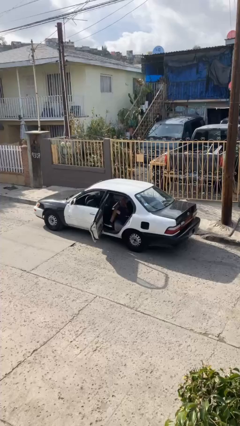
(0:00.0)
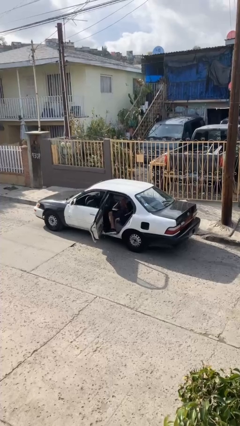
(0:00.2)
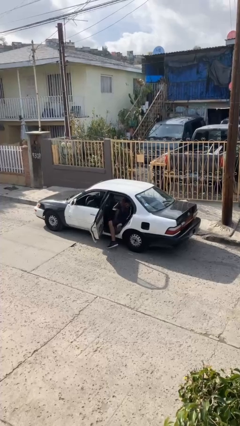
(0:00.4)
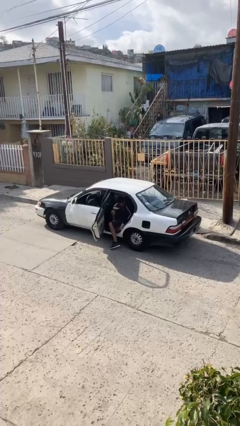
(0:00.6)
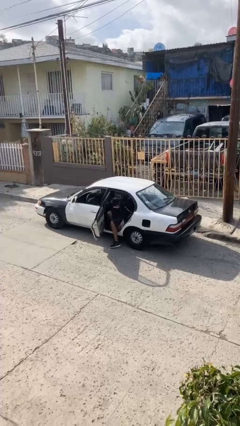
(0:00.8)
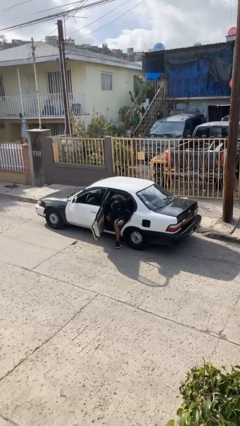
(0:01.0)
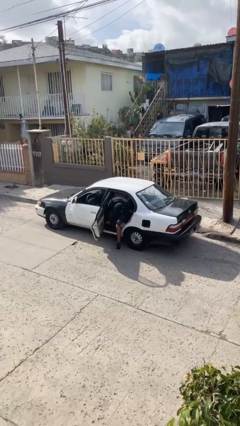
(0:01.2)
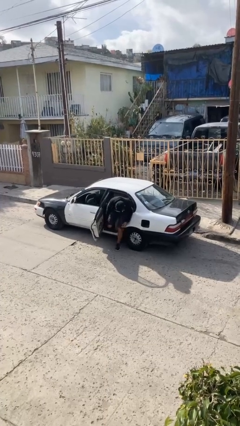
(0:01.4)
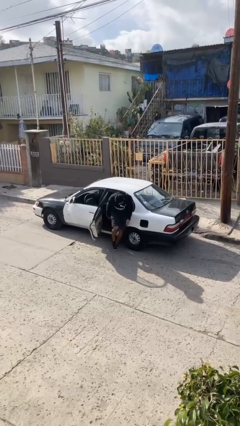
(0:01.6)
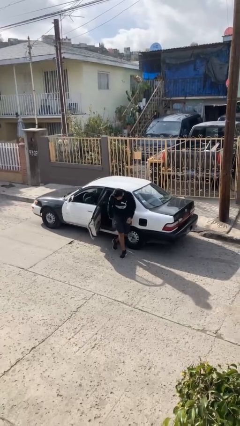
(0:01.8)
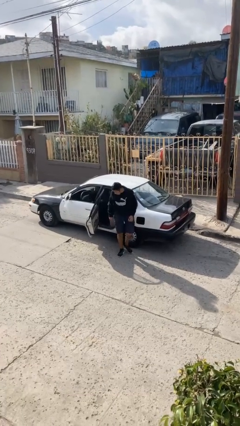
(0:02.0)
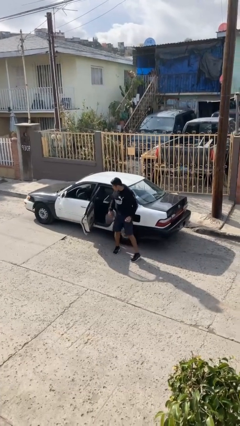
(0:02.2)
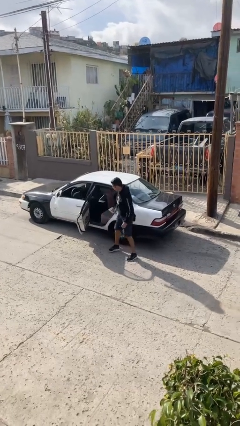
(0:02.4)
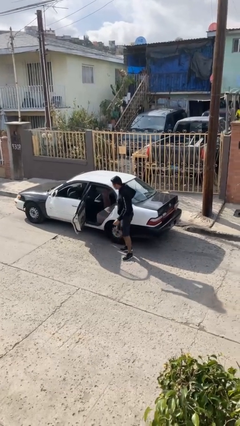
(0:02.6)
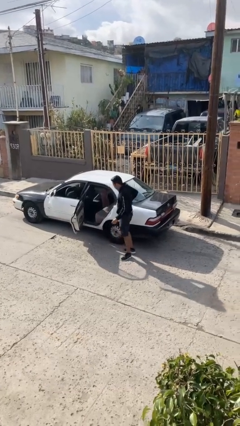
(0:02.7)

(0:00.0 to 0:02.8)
person exits car

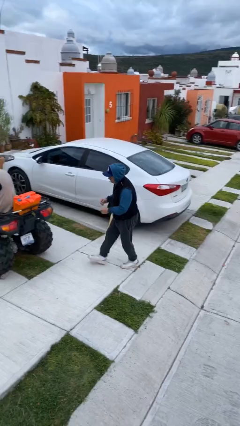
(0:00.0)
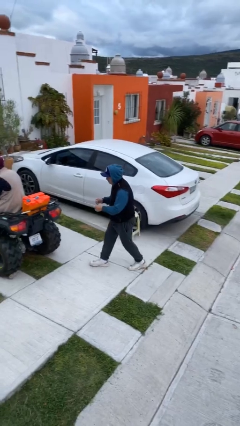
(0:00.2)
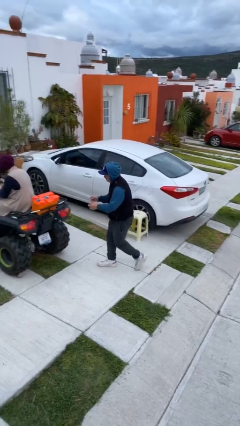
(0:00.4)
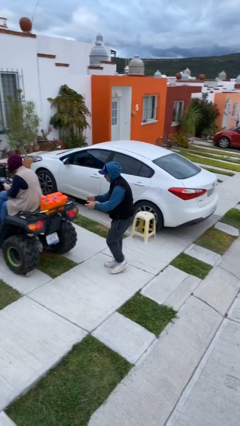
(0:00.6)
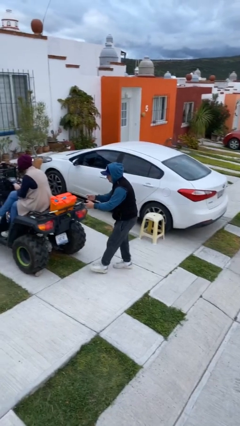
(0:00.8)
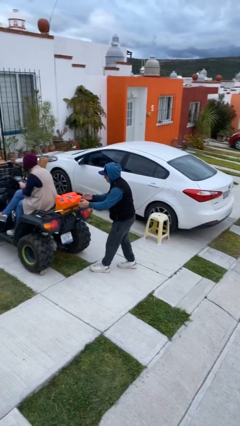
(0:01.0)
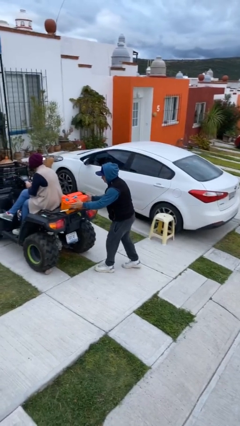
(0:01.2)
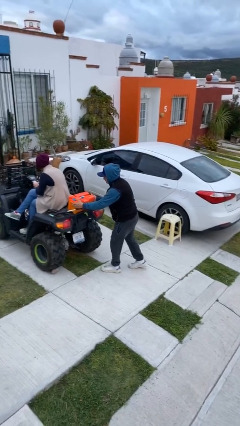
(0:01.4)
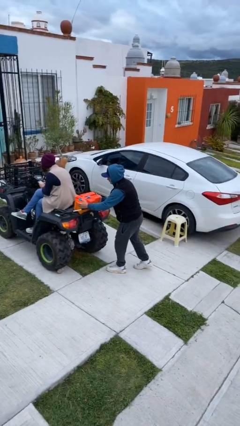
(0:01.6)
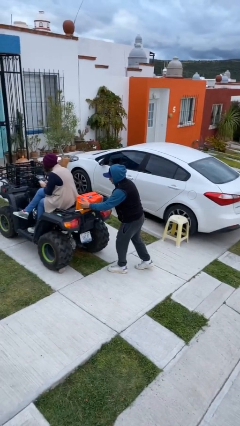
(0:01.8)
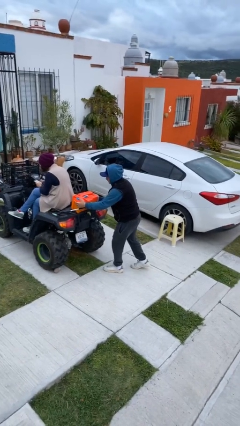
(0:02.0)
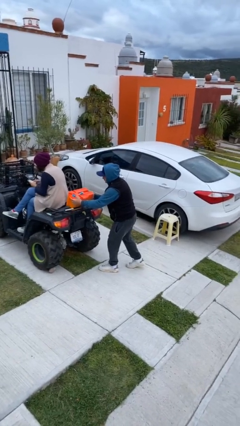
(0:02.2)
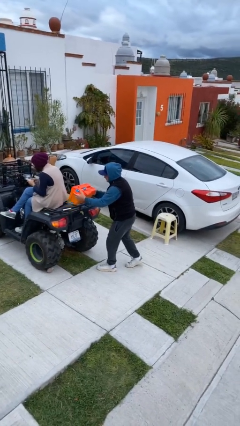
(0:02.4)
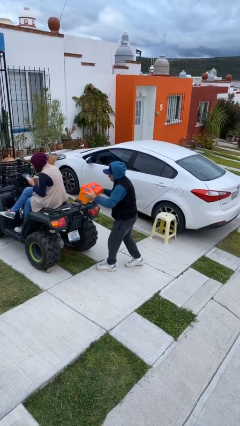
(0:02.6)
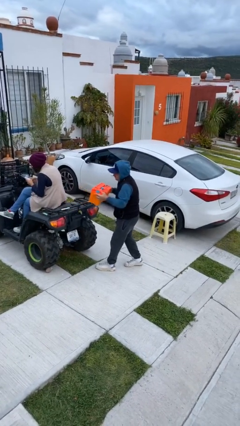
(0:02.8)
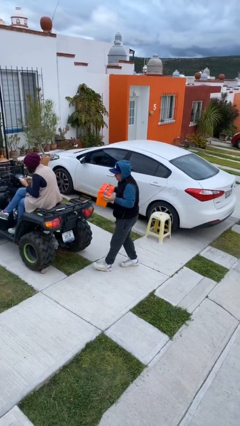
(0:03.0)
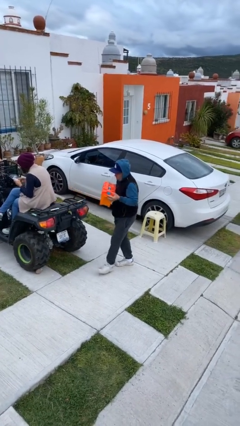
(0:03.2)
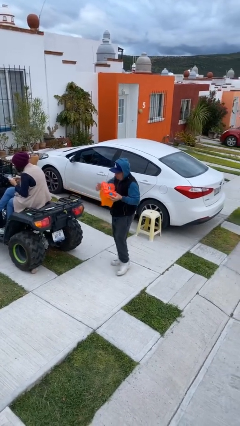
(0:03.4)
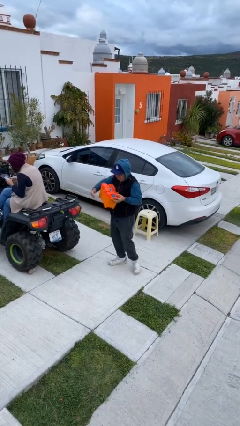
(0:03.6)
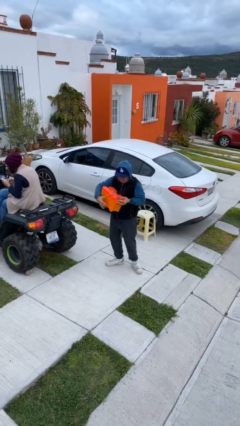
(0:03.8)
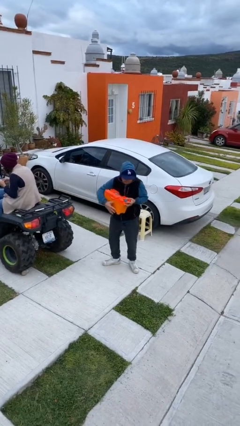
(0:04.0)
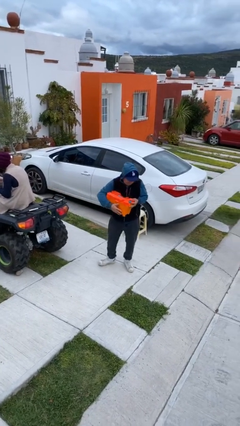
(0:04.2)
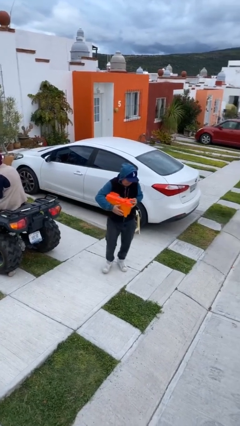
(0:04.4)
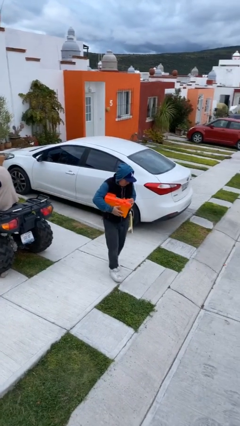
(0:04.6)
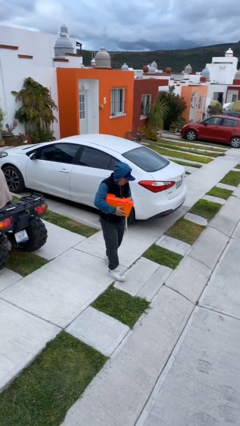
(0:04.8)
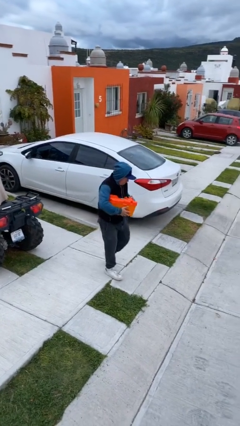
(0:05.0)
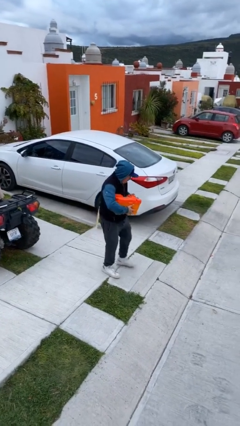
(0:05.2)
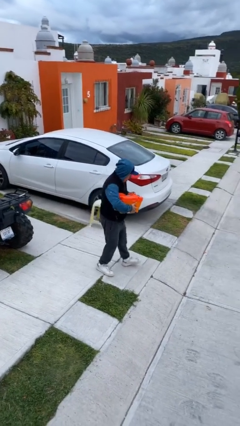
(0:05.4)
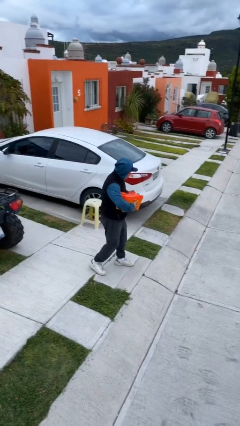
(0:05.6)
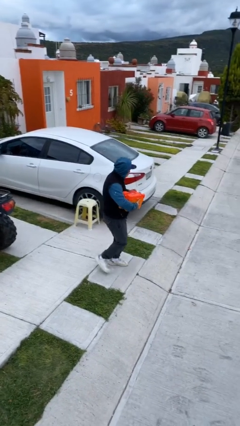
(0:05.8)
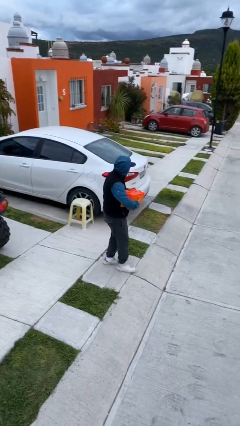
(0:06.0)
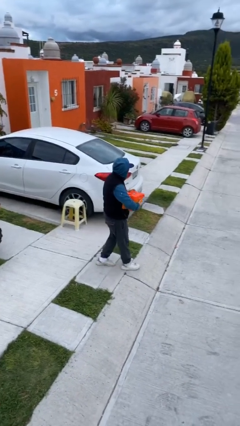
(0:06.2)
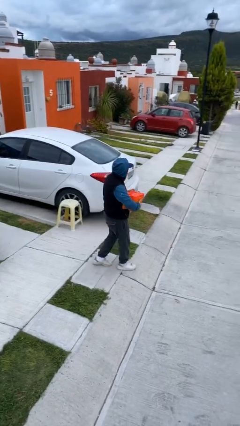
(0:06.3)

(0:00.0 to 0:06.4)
person steals object from person

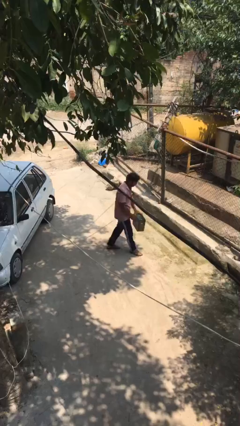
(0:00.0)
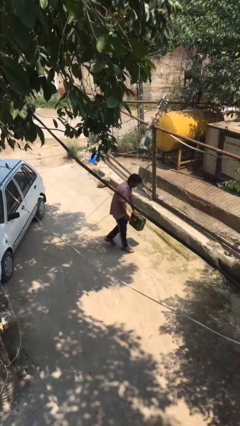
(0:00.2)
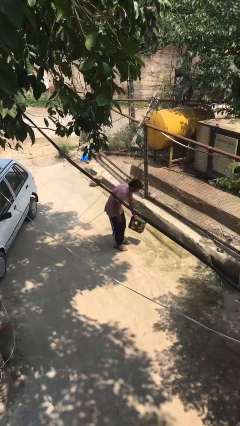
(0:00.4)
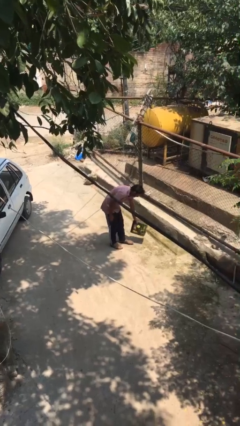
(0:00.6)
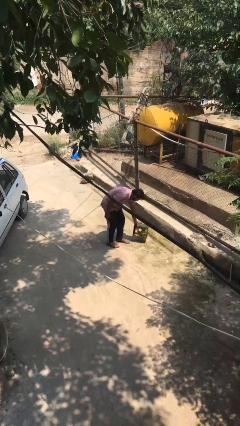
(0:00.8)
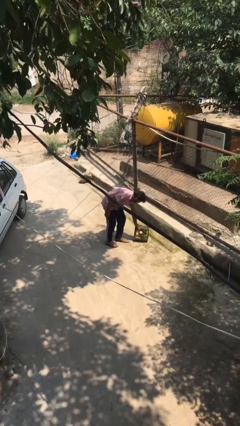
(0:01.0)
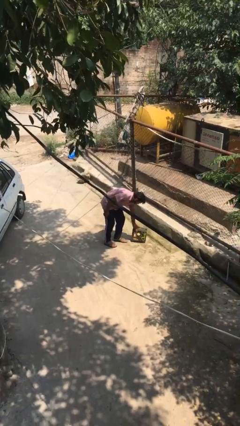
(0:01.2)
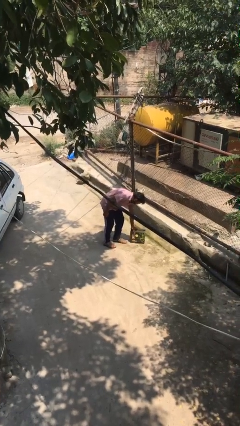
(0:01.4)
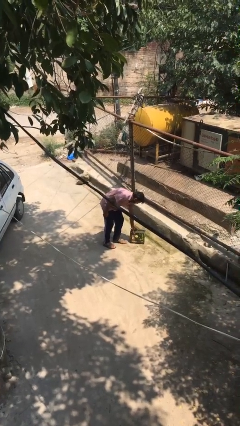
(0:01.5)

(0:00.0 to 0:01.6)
person puts down object on floor

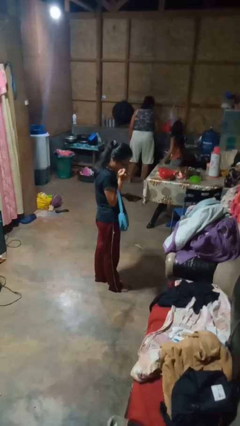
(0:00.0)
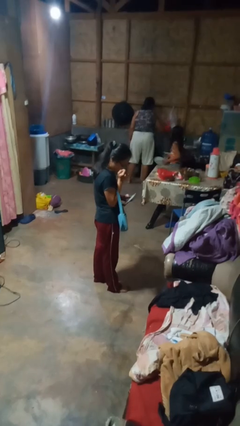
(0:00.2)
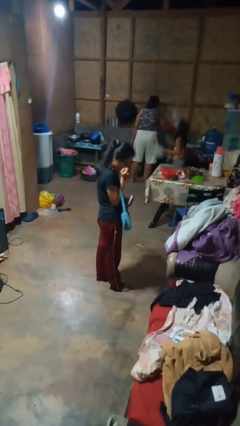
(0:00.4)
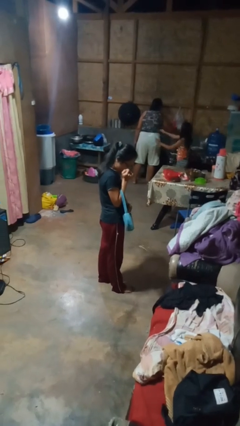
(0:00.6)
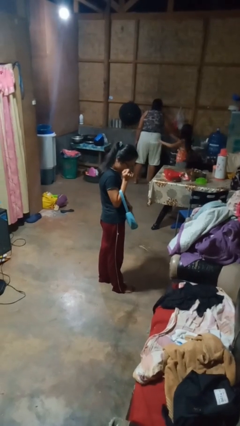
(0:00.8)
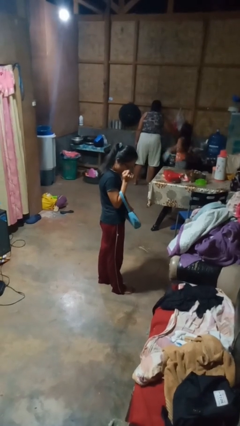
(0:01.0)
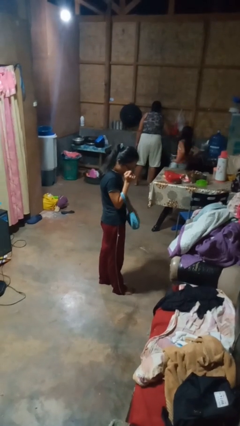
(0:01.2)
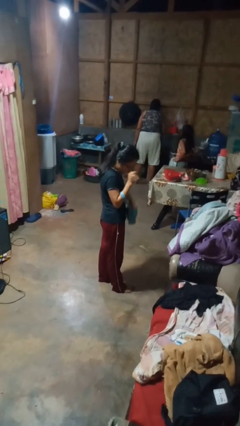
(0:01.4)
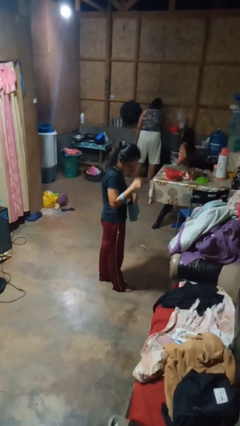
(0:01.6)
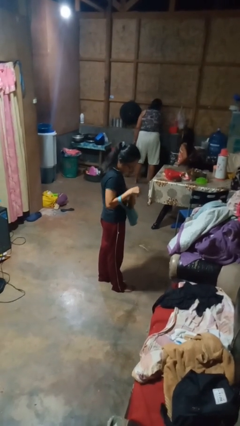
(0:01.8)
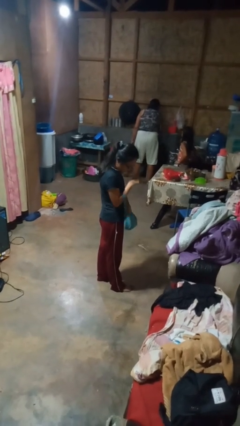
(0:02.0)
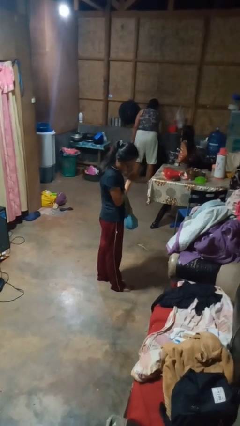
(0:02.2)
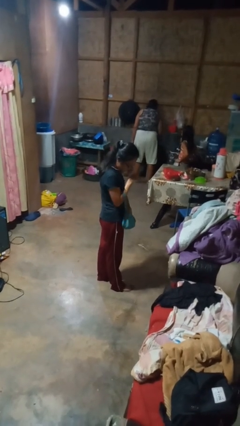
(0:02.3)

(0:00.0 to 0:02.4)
person puts object into purse

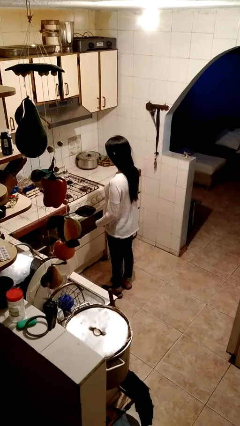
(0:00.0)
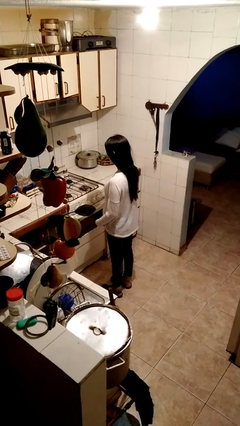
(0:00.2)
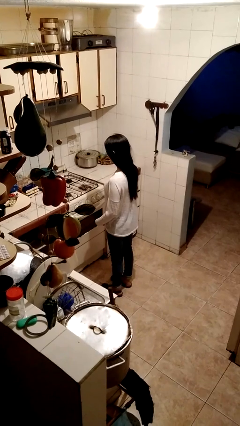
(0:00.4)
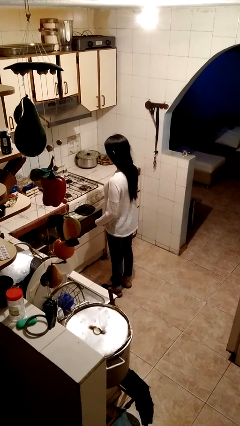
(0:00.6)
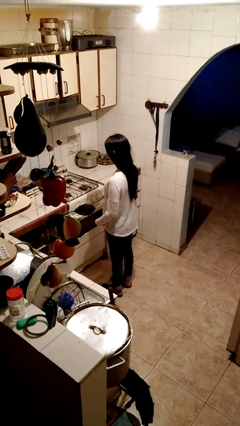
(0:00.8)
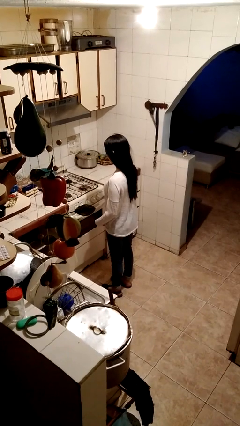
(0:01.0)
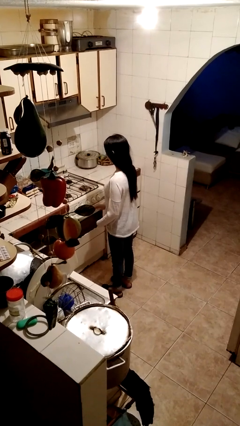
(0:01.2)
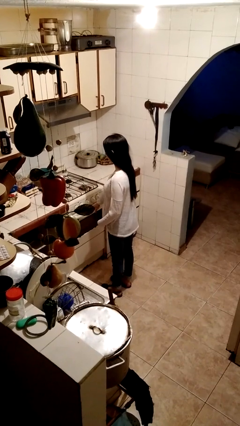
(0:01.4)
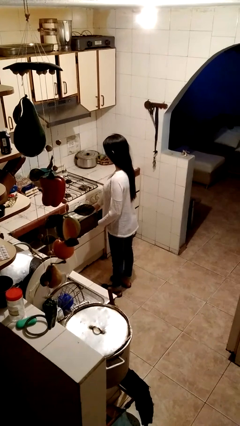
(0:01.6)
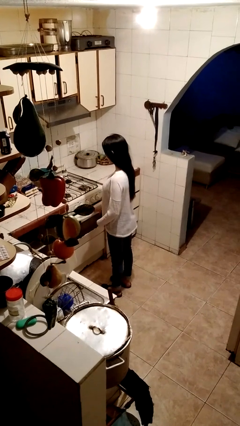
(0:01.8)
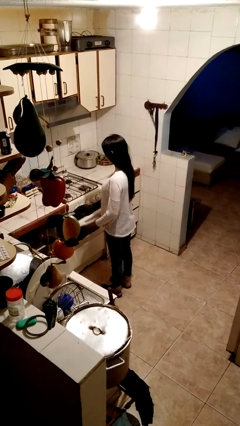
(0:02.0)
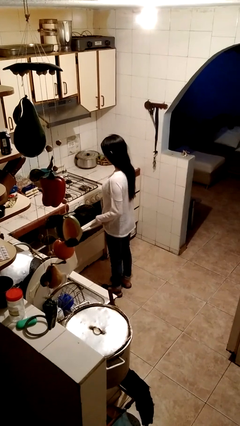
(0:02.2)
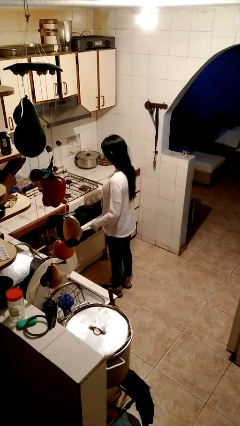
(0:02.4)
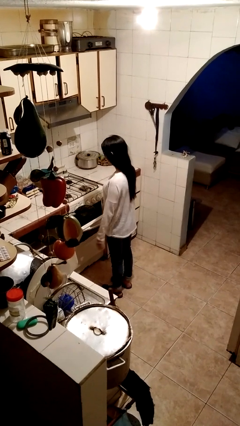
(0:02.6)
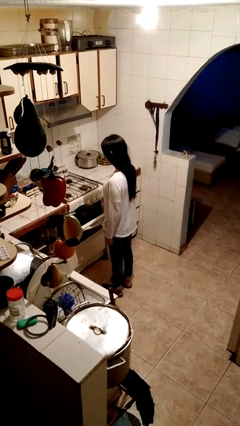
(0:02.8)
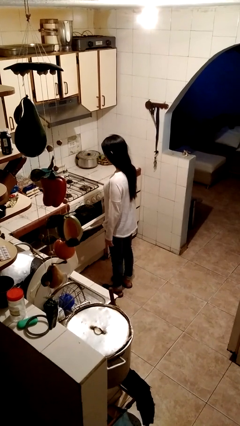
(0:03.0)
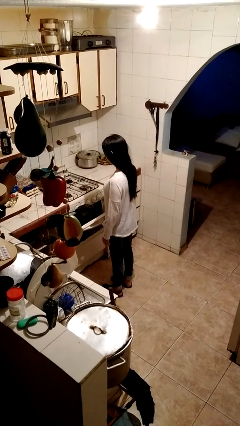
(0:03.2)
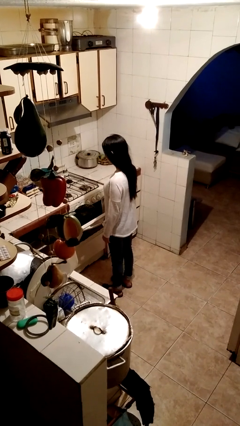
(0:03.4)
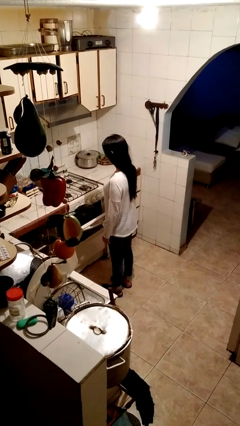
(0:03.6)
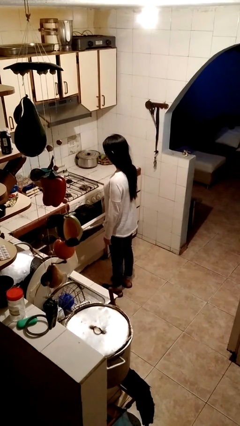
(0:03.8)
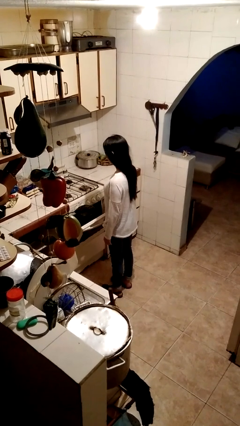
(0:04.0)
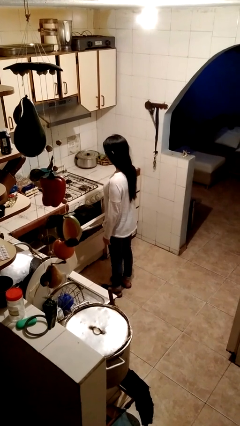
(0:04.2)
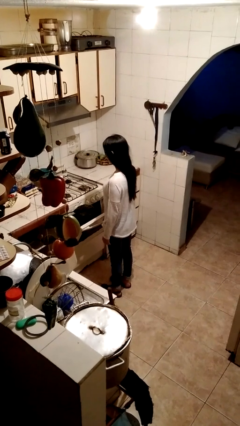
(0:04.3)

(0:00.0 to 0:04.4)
person opens oven door
